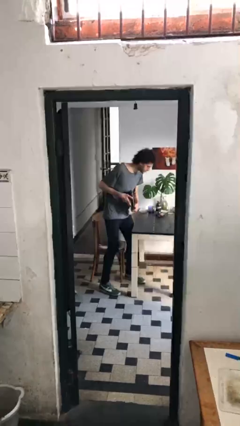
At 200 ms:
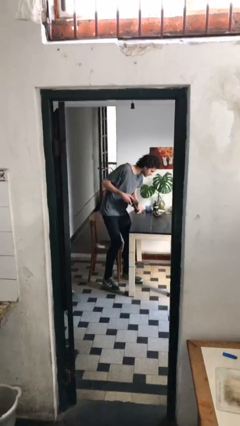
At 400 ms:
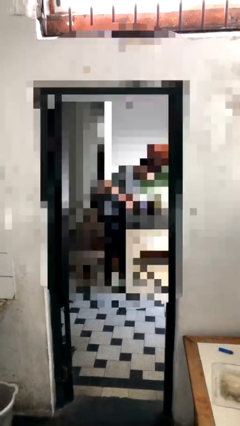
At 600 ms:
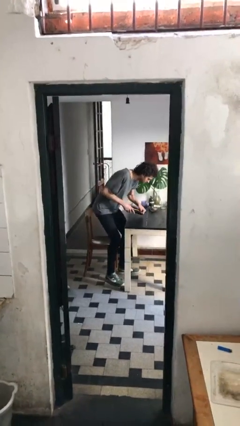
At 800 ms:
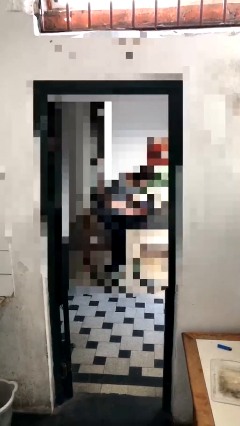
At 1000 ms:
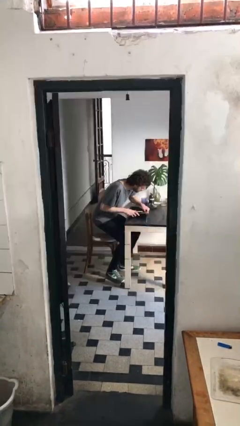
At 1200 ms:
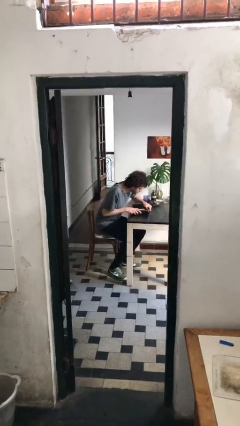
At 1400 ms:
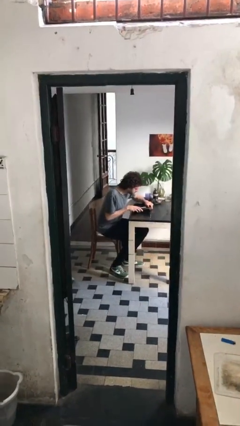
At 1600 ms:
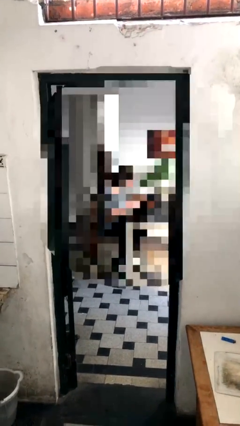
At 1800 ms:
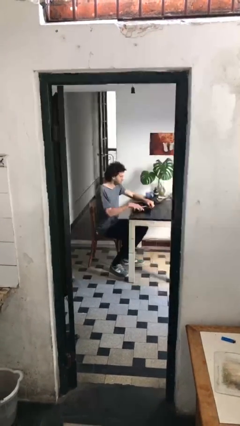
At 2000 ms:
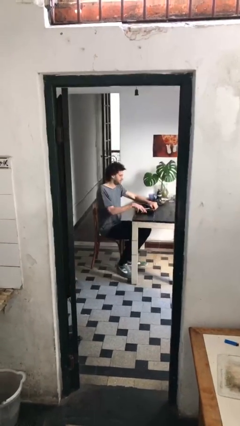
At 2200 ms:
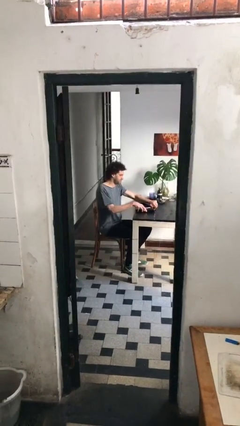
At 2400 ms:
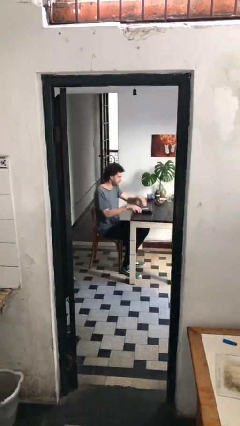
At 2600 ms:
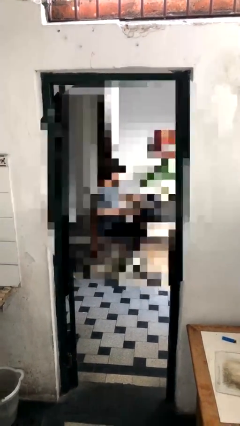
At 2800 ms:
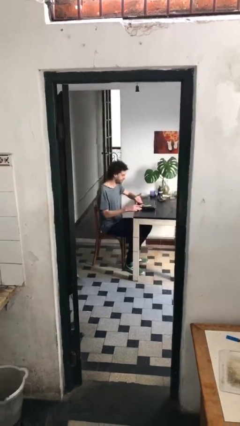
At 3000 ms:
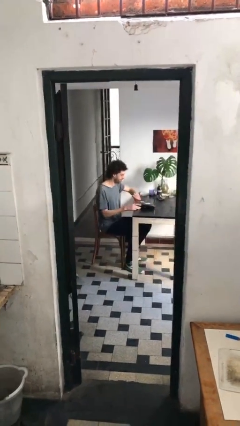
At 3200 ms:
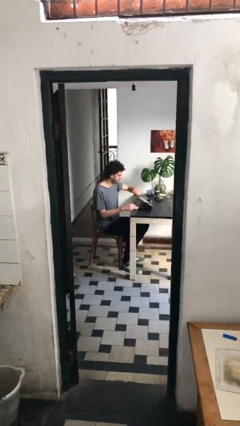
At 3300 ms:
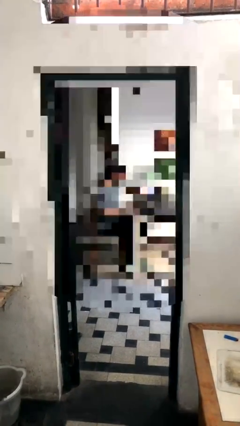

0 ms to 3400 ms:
person sits down

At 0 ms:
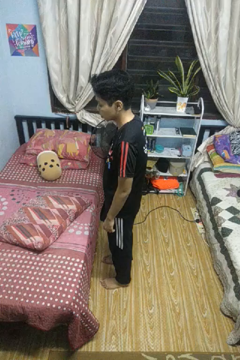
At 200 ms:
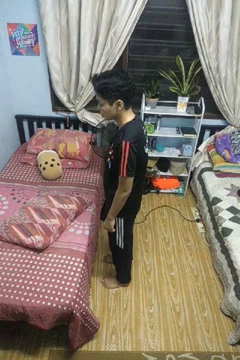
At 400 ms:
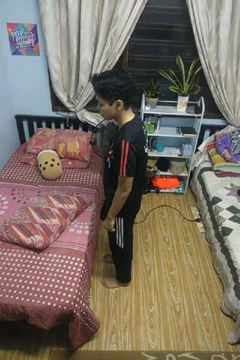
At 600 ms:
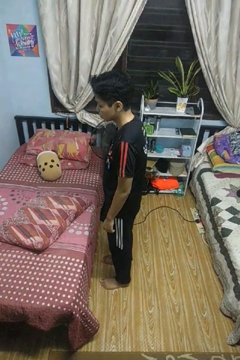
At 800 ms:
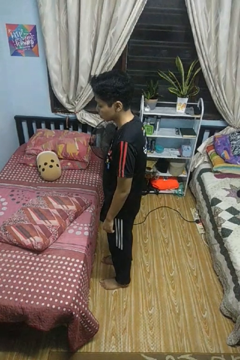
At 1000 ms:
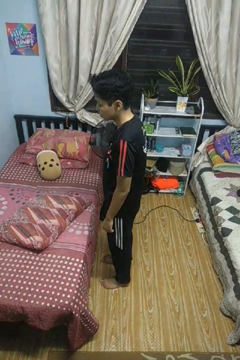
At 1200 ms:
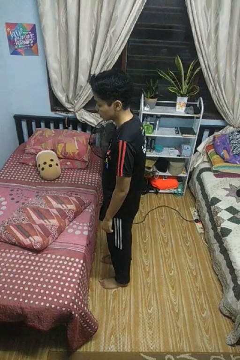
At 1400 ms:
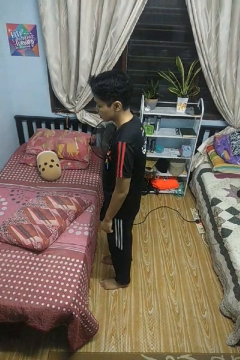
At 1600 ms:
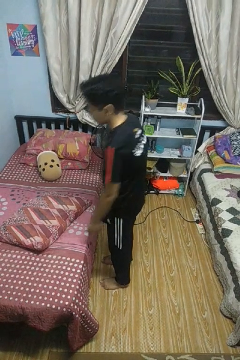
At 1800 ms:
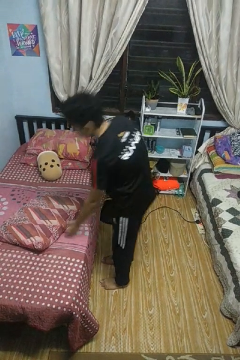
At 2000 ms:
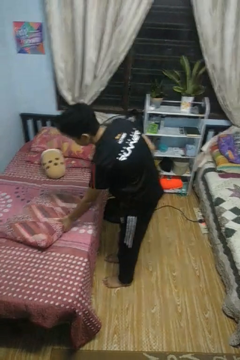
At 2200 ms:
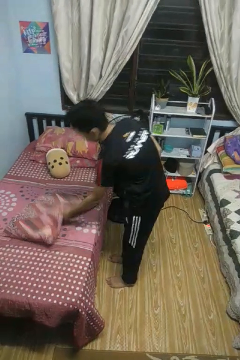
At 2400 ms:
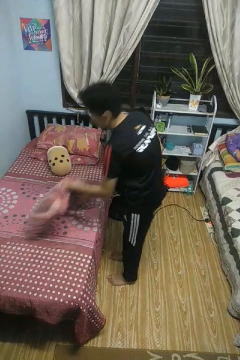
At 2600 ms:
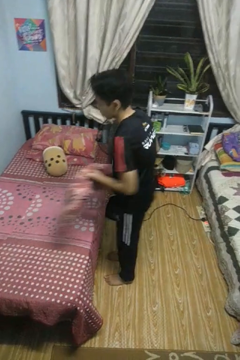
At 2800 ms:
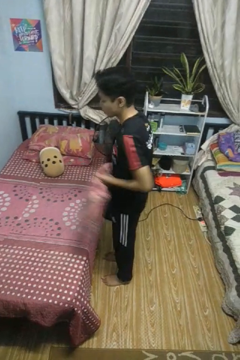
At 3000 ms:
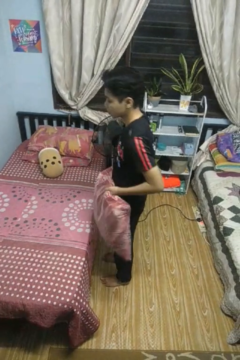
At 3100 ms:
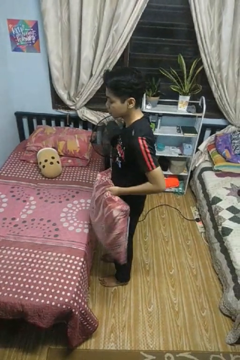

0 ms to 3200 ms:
person picks up object from bed

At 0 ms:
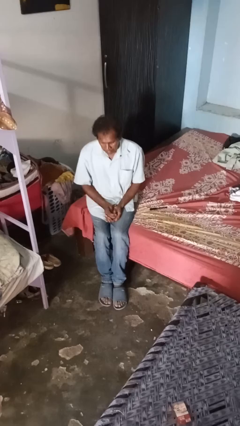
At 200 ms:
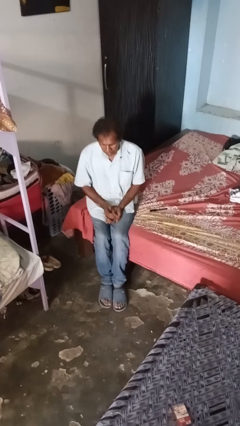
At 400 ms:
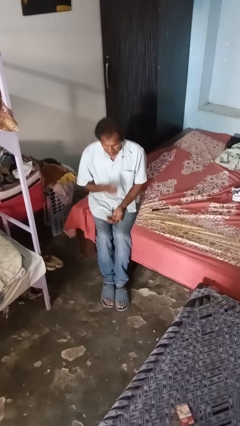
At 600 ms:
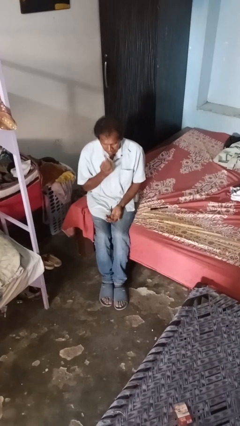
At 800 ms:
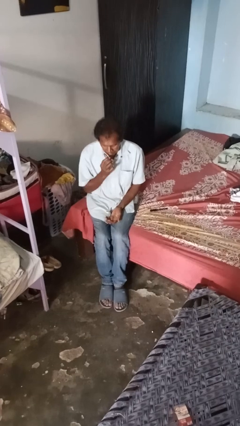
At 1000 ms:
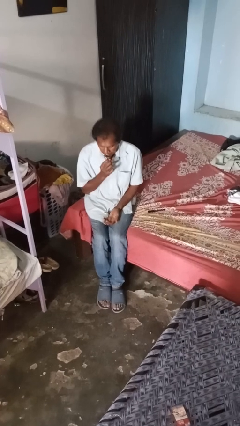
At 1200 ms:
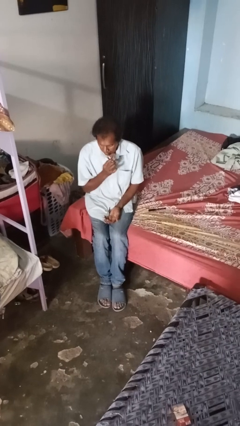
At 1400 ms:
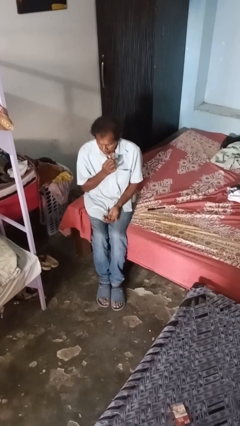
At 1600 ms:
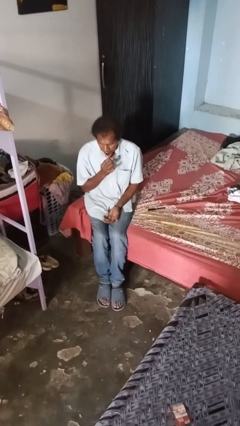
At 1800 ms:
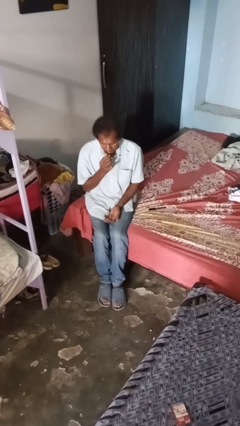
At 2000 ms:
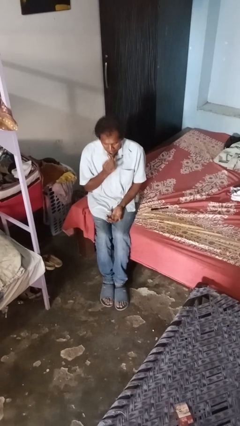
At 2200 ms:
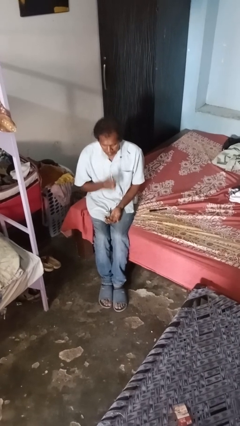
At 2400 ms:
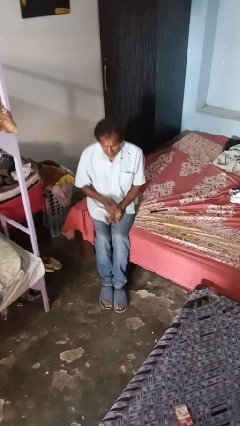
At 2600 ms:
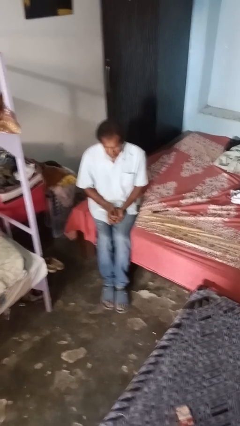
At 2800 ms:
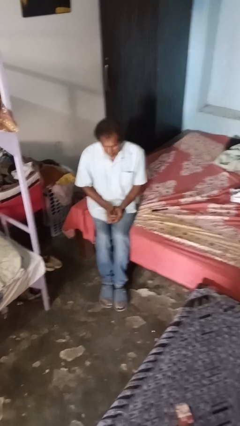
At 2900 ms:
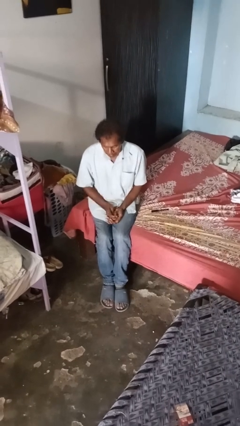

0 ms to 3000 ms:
person applies lip makeup

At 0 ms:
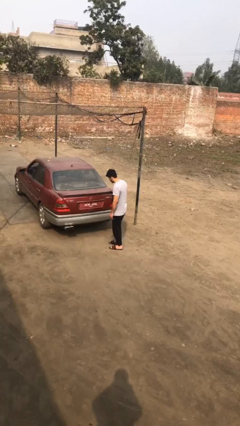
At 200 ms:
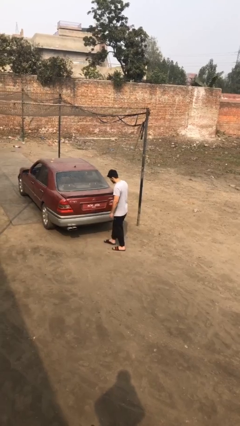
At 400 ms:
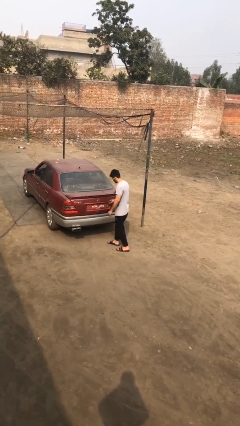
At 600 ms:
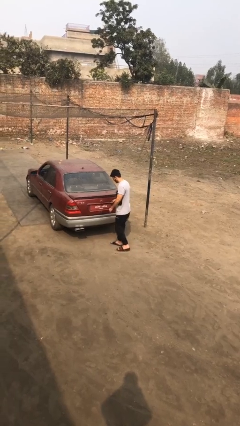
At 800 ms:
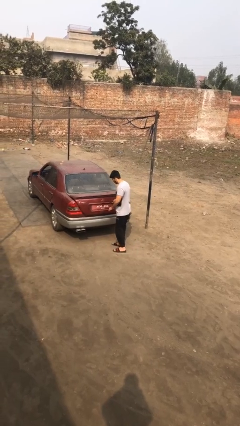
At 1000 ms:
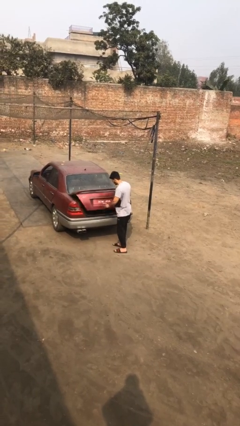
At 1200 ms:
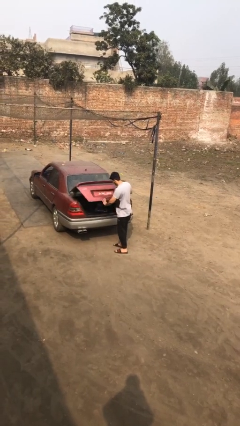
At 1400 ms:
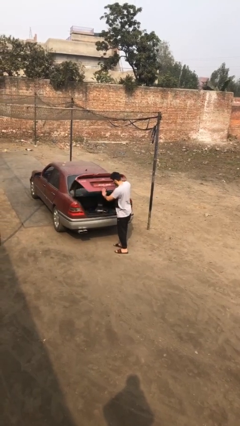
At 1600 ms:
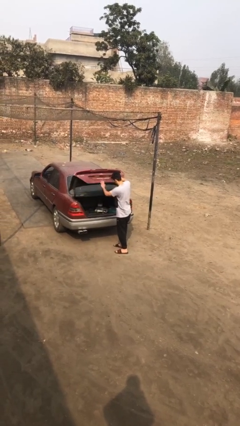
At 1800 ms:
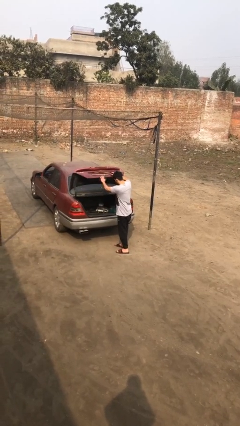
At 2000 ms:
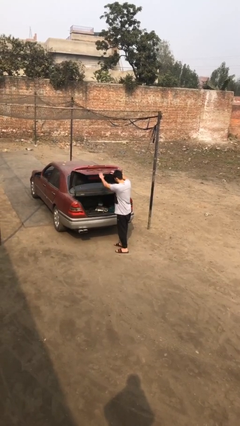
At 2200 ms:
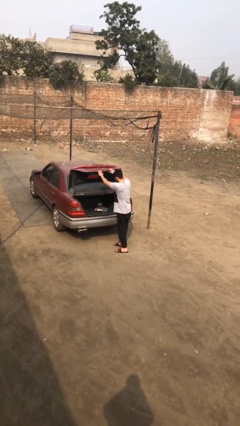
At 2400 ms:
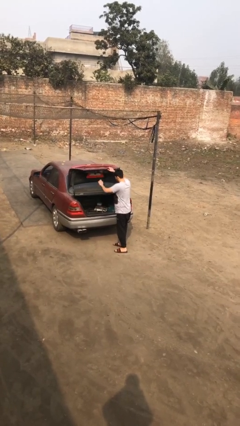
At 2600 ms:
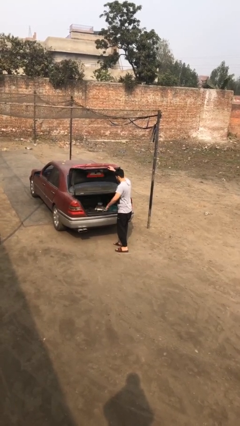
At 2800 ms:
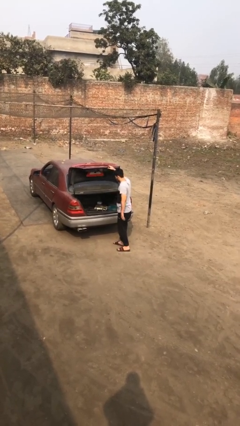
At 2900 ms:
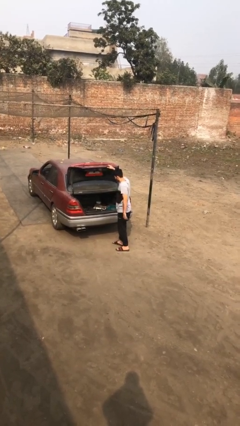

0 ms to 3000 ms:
person opens car trunk

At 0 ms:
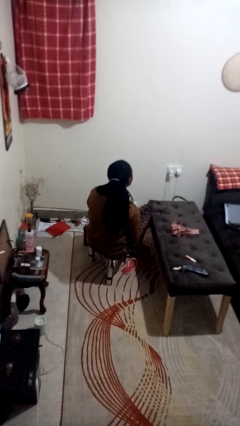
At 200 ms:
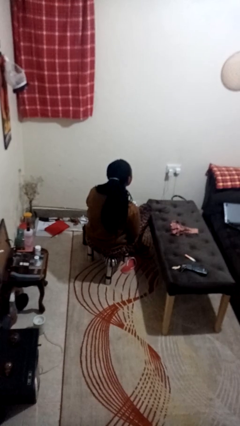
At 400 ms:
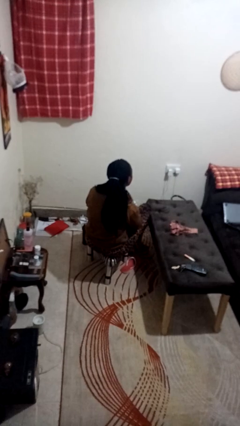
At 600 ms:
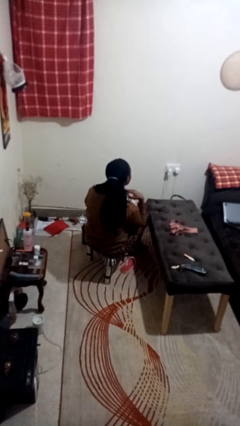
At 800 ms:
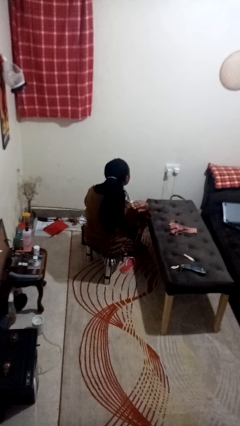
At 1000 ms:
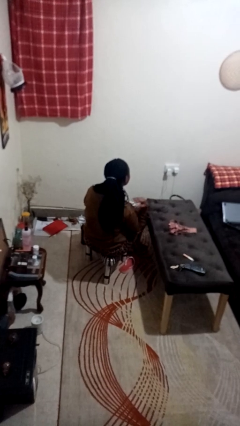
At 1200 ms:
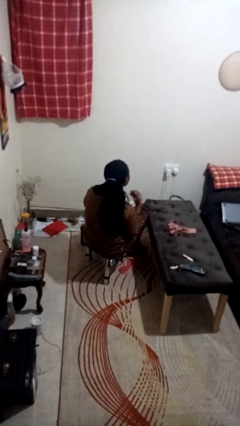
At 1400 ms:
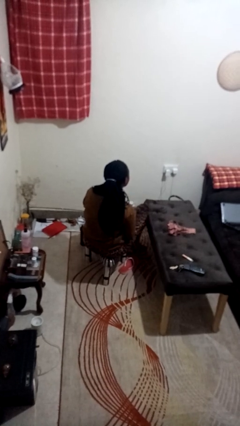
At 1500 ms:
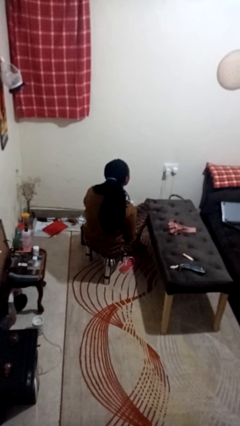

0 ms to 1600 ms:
person gestures cut

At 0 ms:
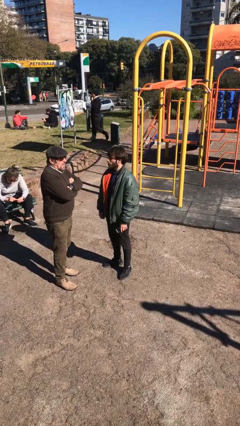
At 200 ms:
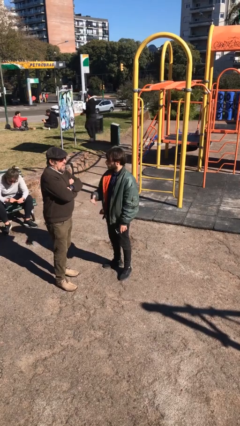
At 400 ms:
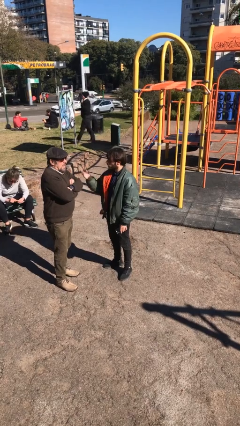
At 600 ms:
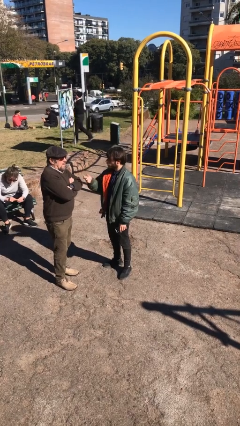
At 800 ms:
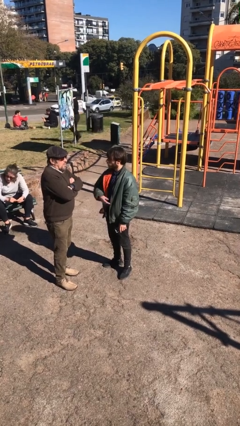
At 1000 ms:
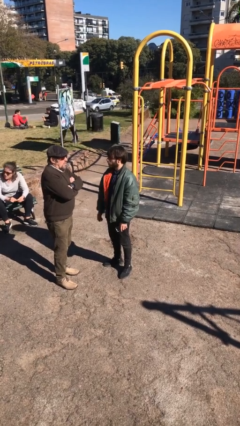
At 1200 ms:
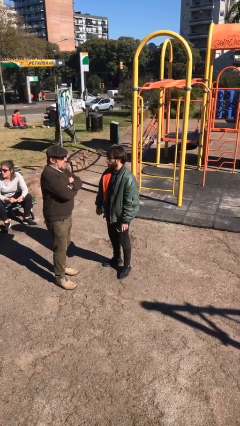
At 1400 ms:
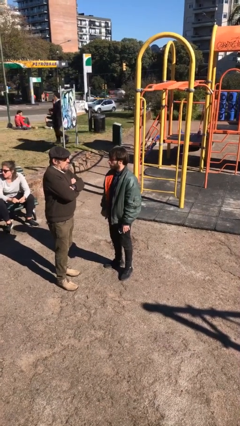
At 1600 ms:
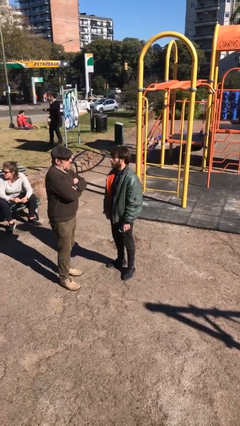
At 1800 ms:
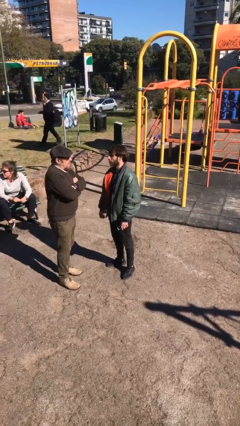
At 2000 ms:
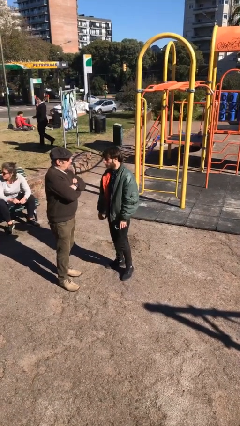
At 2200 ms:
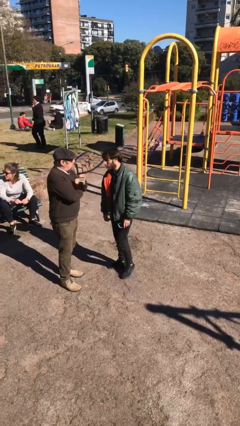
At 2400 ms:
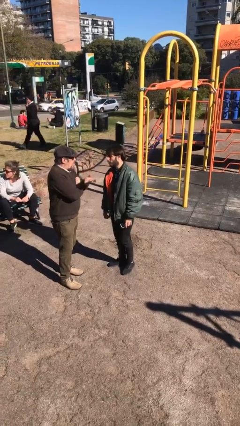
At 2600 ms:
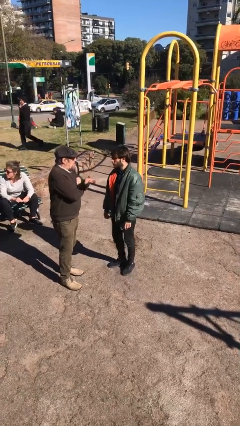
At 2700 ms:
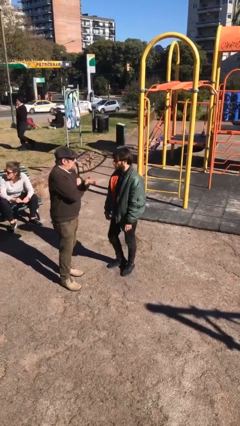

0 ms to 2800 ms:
person talks to person

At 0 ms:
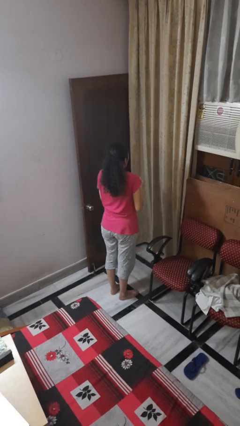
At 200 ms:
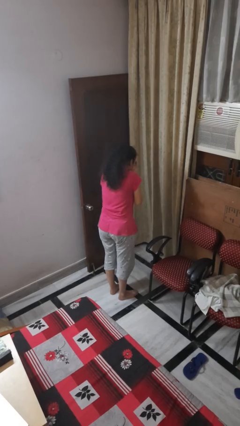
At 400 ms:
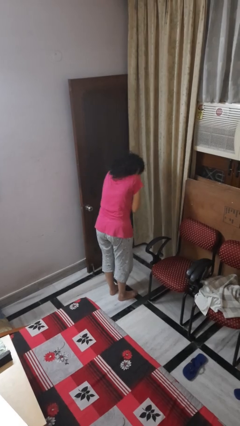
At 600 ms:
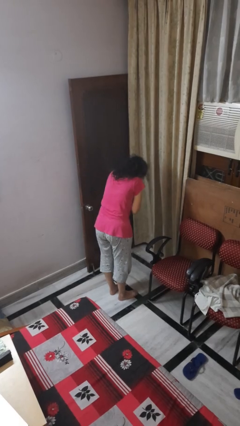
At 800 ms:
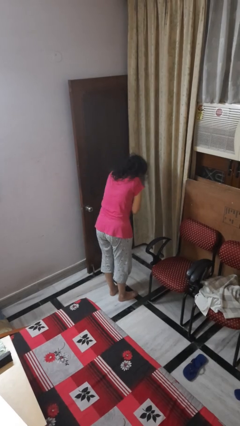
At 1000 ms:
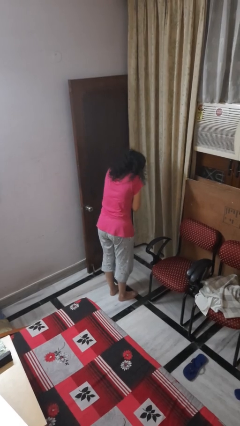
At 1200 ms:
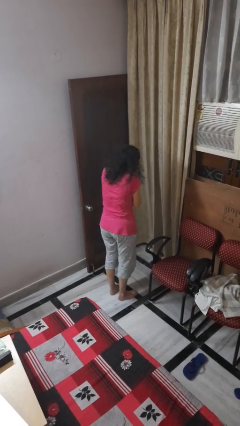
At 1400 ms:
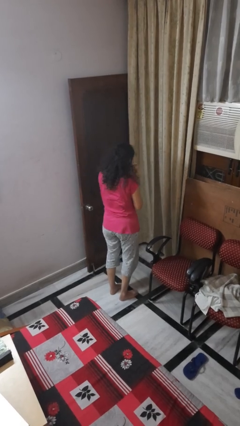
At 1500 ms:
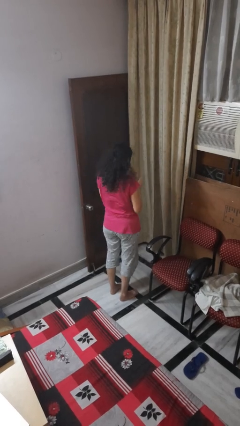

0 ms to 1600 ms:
person sneezes into hand
